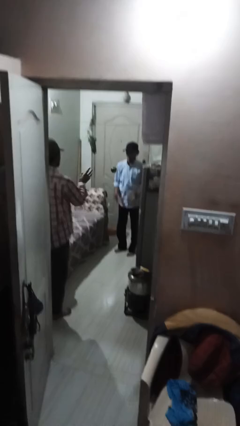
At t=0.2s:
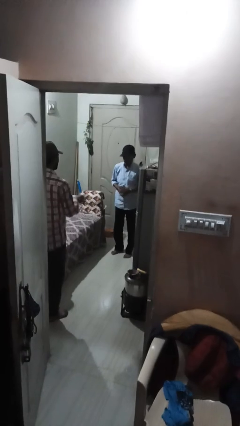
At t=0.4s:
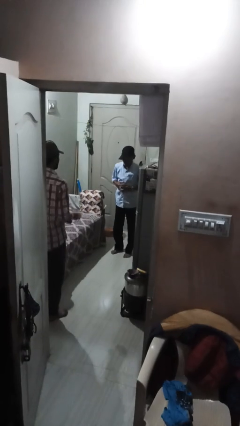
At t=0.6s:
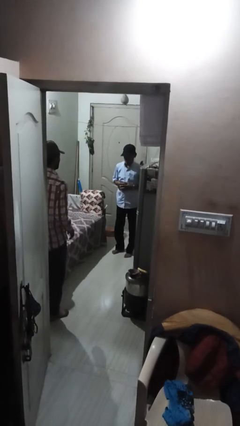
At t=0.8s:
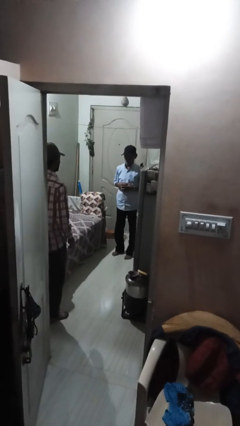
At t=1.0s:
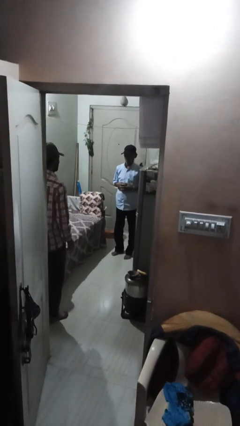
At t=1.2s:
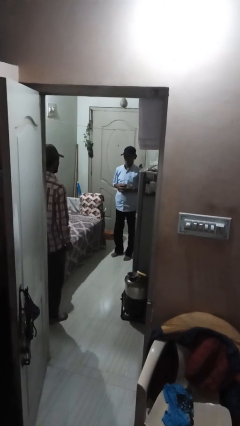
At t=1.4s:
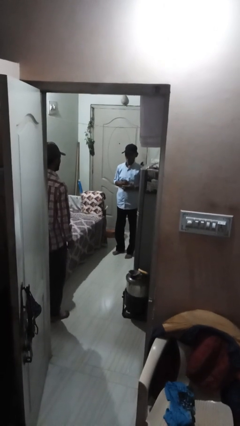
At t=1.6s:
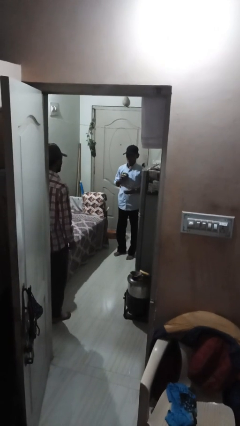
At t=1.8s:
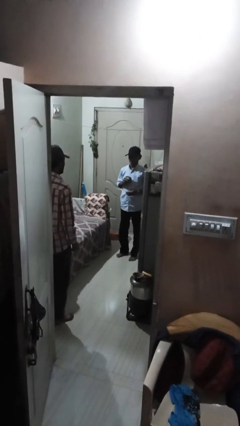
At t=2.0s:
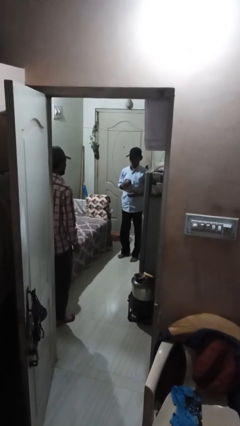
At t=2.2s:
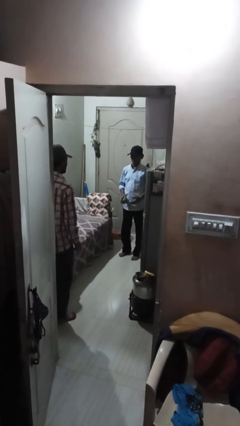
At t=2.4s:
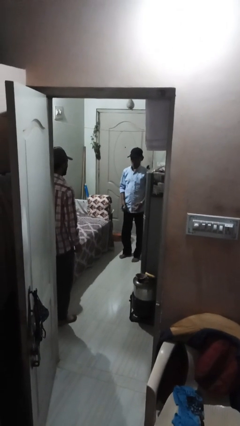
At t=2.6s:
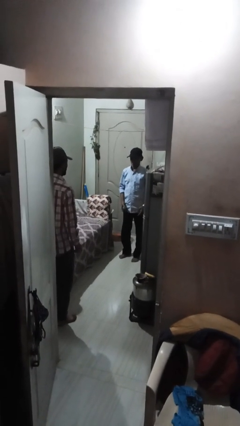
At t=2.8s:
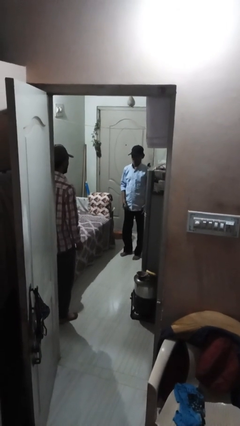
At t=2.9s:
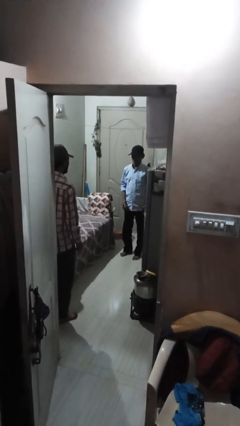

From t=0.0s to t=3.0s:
person catches object from person

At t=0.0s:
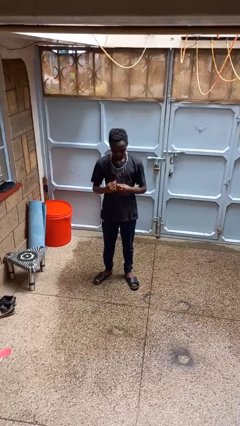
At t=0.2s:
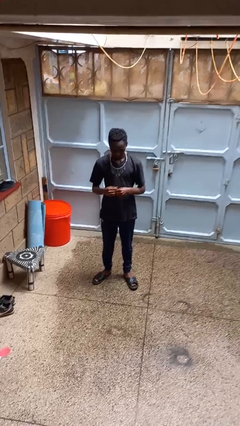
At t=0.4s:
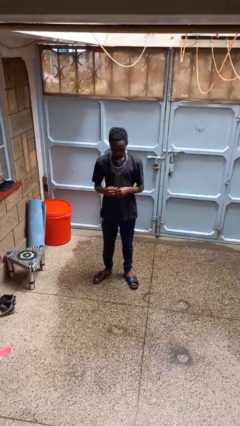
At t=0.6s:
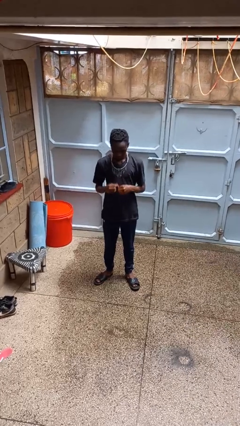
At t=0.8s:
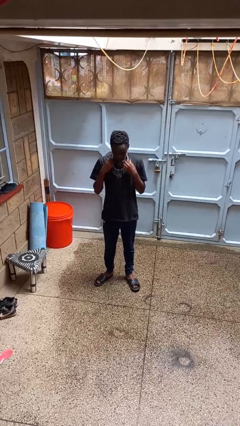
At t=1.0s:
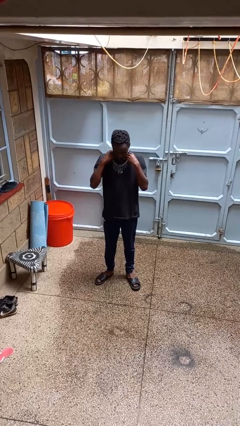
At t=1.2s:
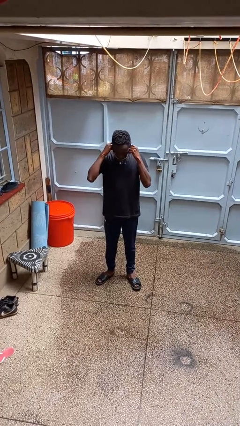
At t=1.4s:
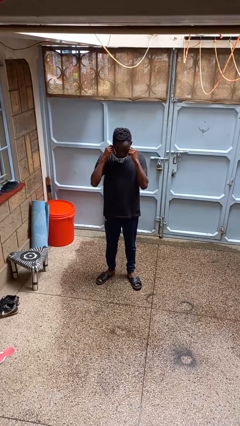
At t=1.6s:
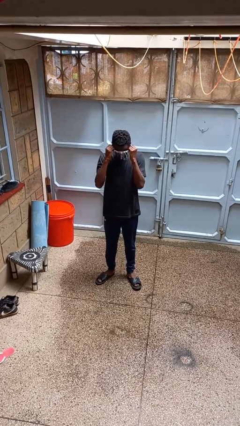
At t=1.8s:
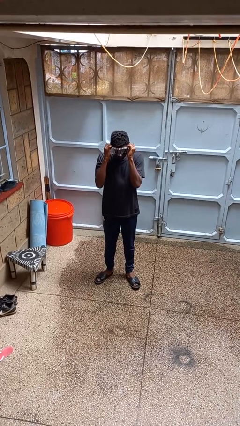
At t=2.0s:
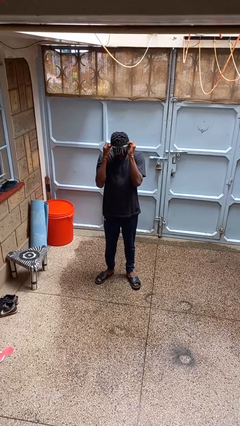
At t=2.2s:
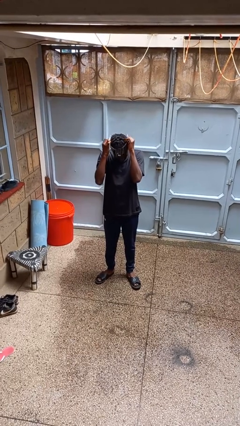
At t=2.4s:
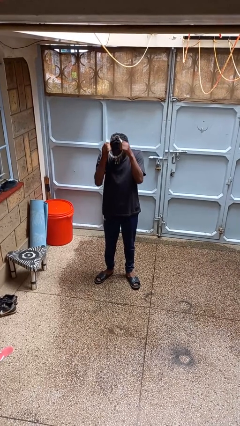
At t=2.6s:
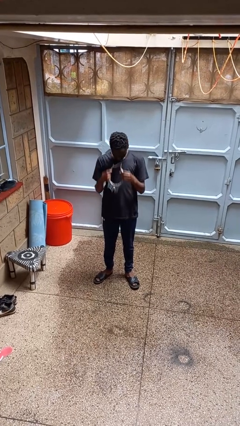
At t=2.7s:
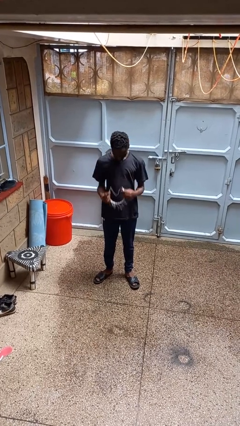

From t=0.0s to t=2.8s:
person takes off necklace

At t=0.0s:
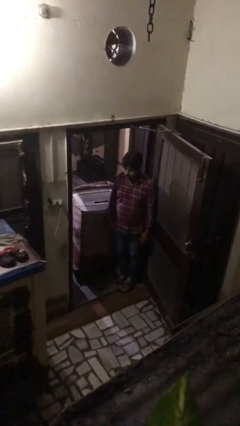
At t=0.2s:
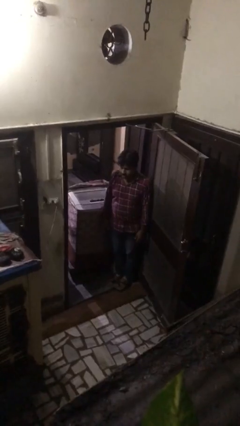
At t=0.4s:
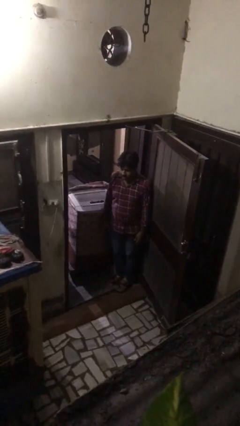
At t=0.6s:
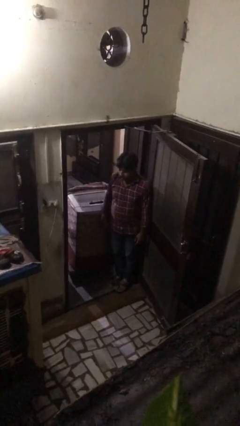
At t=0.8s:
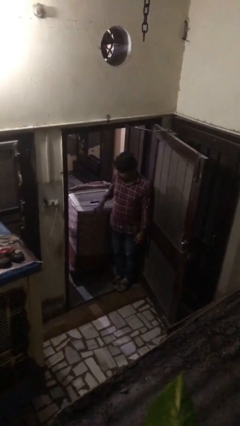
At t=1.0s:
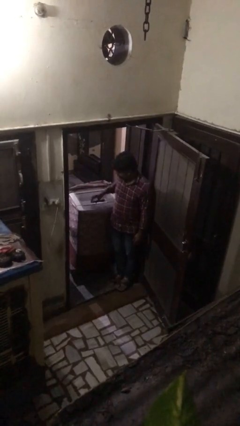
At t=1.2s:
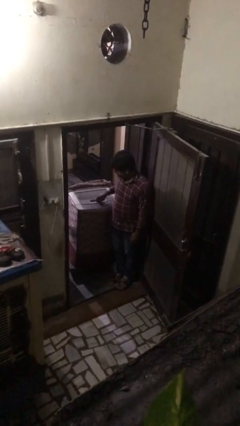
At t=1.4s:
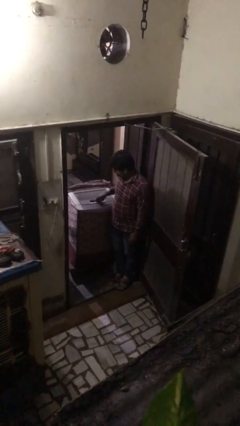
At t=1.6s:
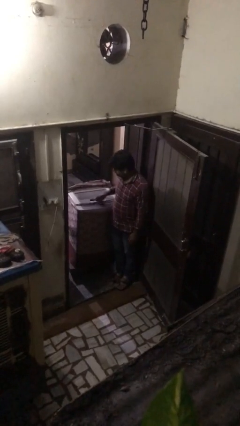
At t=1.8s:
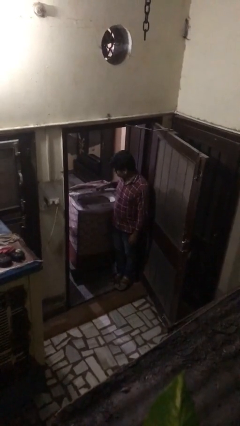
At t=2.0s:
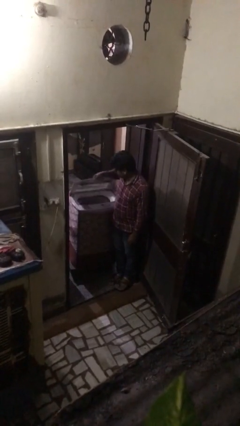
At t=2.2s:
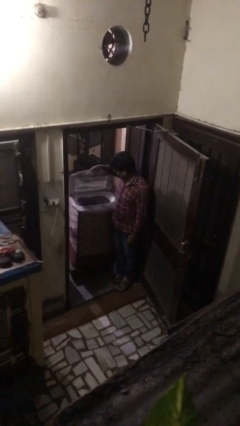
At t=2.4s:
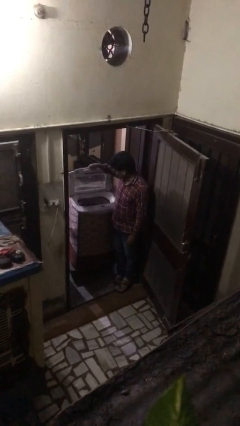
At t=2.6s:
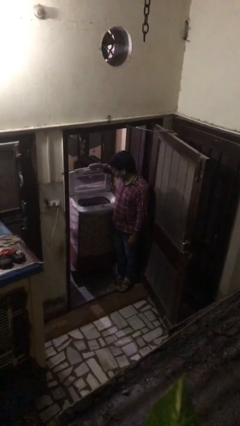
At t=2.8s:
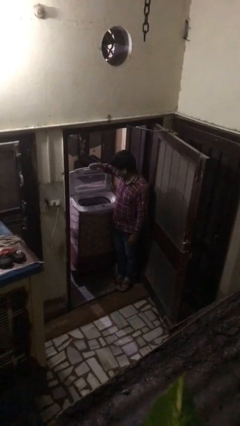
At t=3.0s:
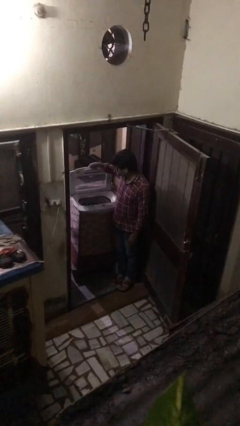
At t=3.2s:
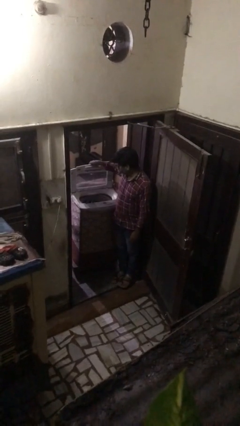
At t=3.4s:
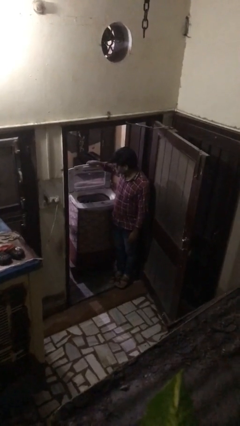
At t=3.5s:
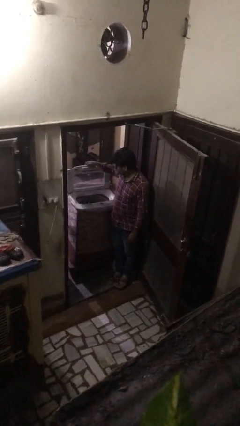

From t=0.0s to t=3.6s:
person opens clothes washer

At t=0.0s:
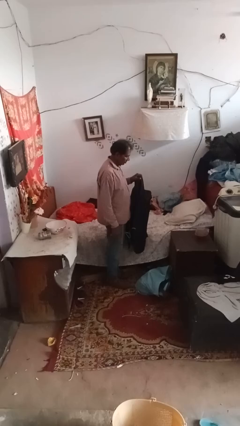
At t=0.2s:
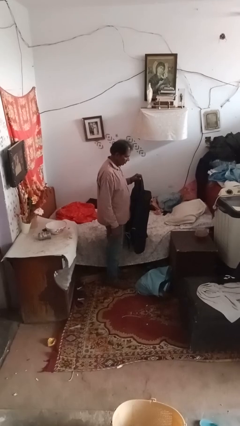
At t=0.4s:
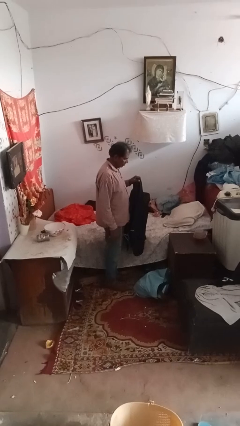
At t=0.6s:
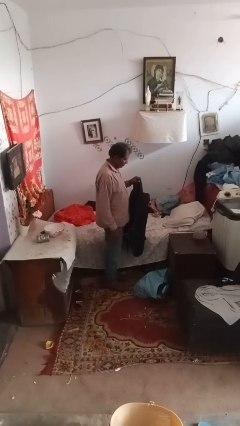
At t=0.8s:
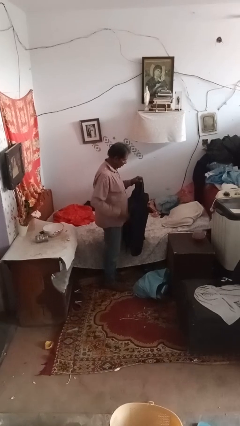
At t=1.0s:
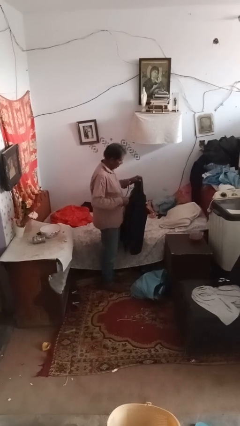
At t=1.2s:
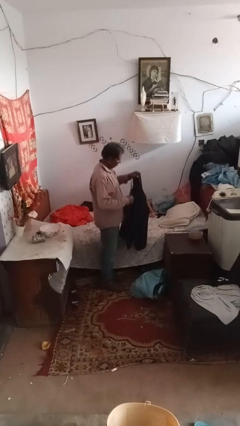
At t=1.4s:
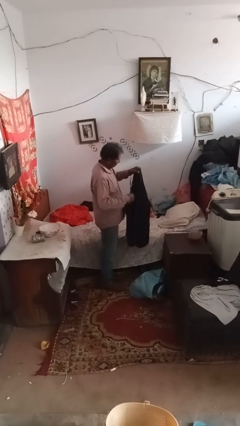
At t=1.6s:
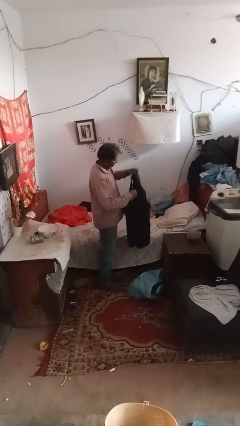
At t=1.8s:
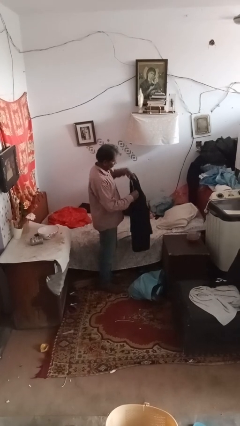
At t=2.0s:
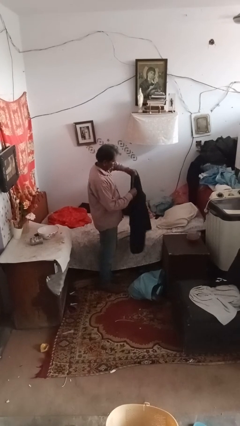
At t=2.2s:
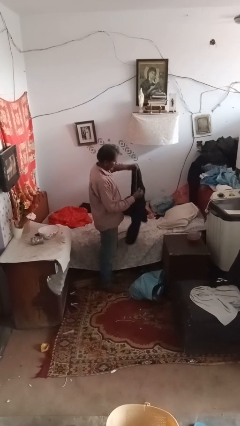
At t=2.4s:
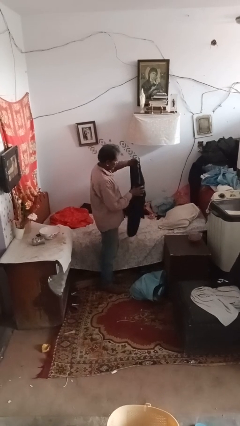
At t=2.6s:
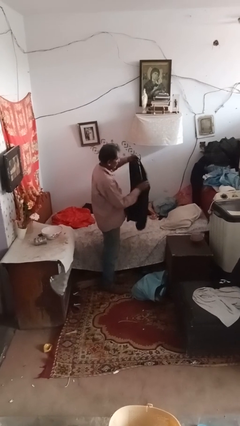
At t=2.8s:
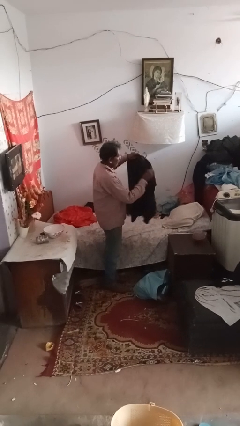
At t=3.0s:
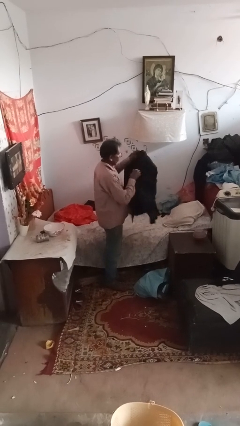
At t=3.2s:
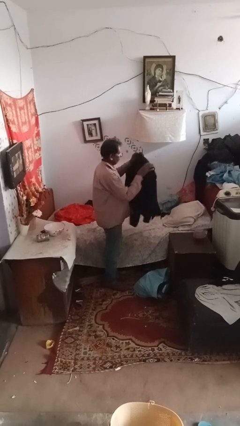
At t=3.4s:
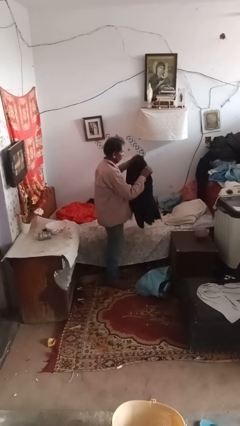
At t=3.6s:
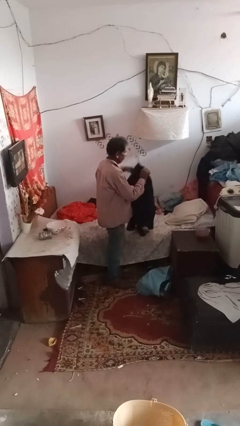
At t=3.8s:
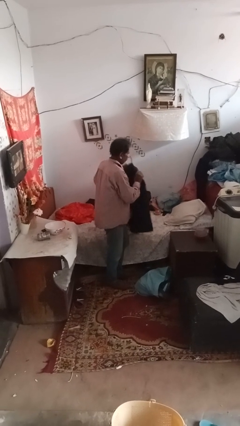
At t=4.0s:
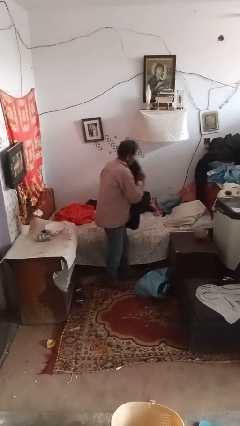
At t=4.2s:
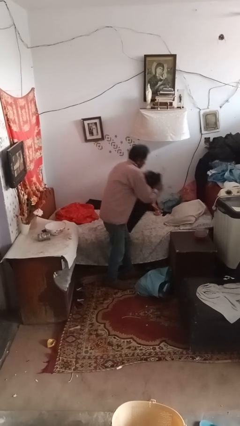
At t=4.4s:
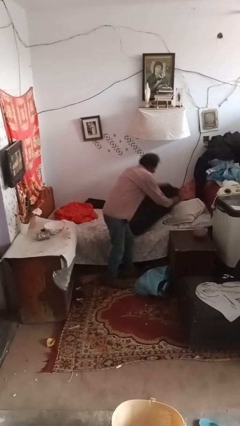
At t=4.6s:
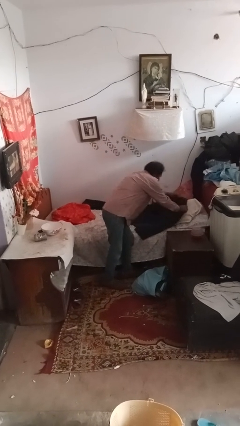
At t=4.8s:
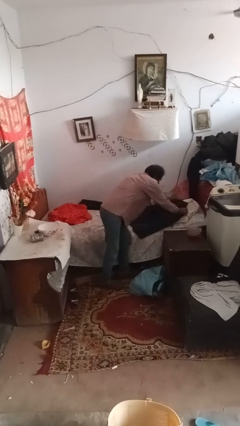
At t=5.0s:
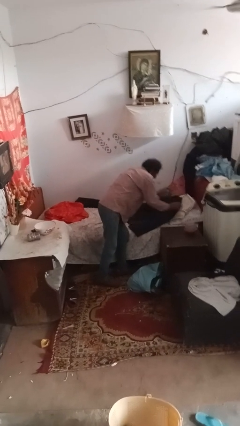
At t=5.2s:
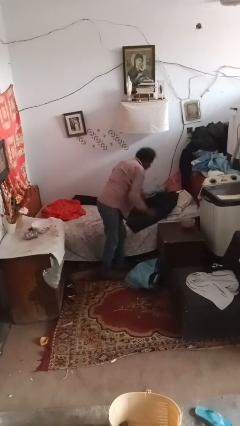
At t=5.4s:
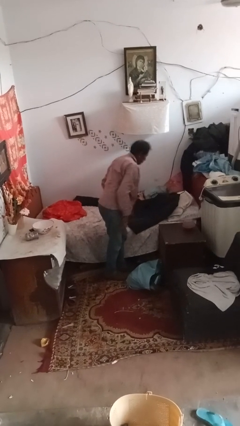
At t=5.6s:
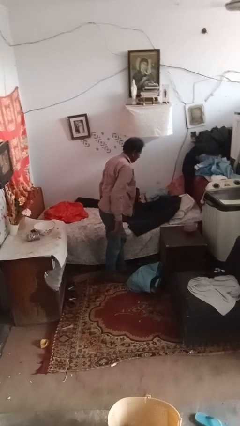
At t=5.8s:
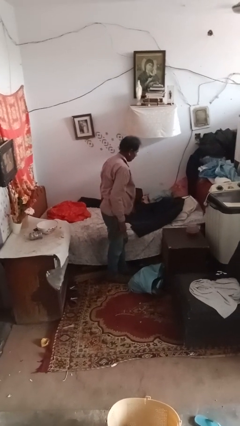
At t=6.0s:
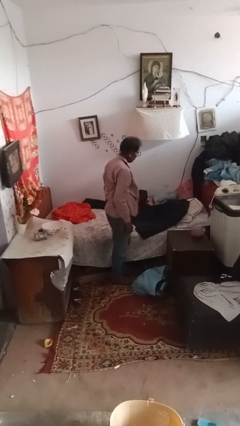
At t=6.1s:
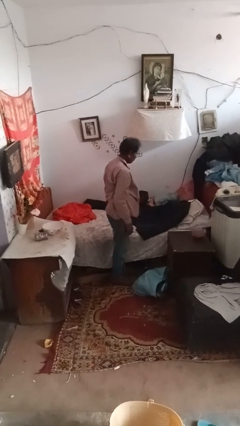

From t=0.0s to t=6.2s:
person puts clothes into closet

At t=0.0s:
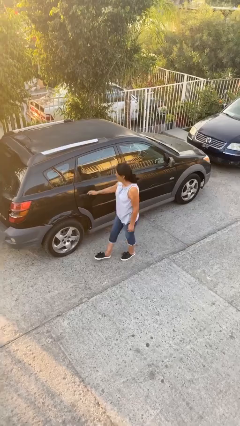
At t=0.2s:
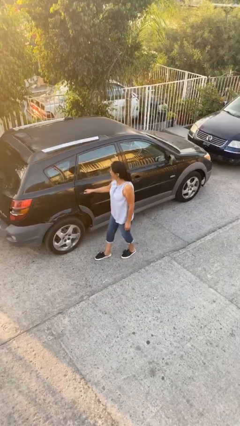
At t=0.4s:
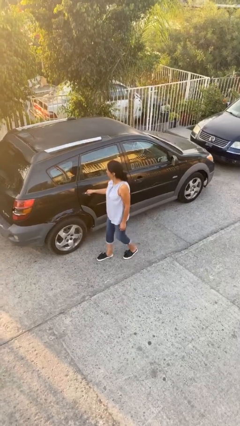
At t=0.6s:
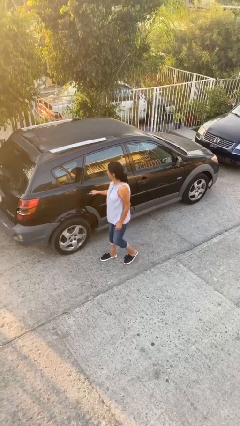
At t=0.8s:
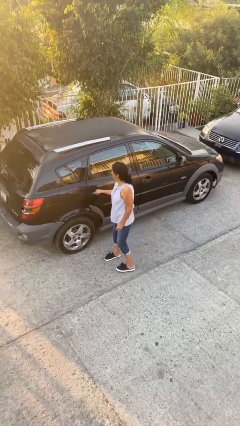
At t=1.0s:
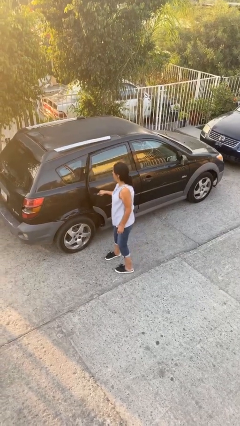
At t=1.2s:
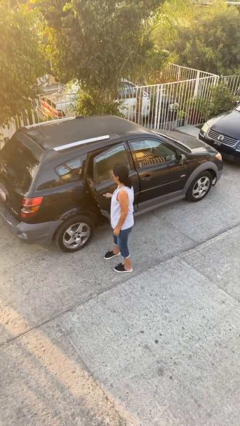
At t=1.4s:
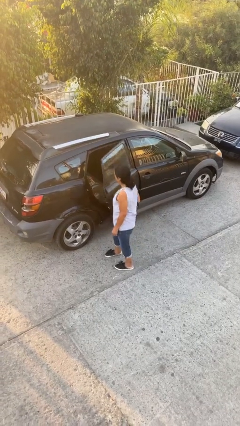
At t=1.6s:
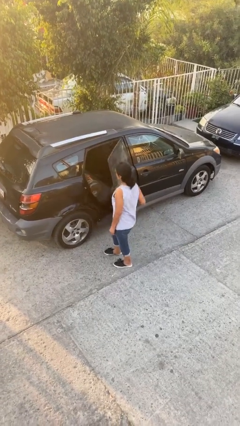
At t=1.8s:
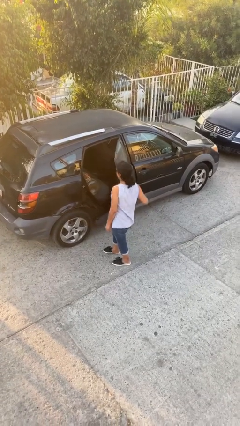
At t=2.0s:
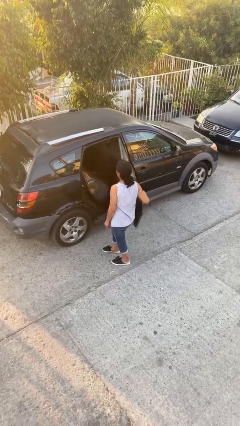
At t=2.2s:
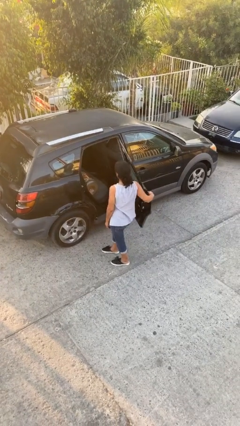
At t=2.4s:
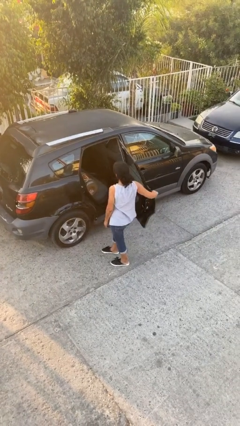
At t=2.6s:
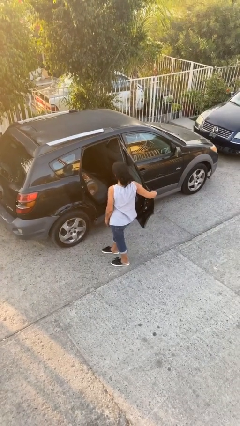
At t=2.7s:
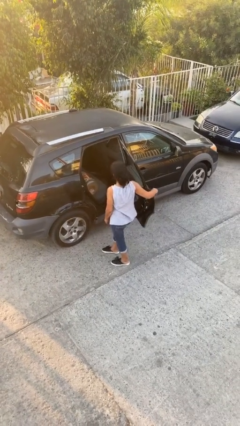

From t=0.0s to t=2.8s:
person opens car door
